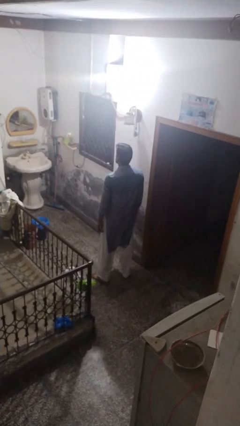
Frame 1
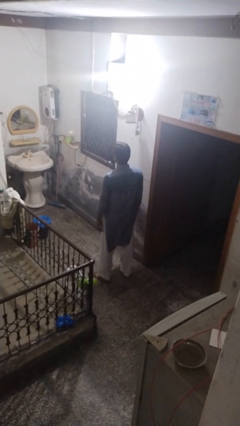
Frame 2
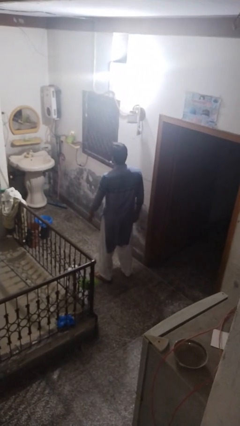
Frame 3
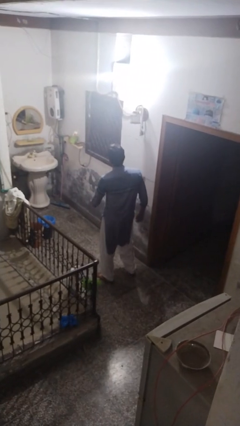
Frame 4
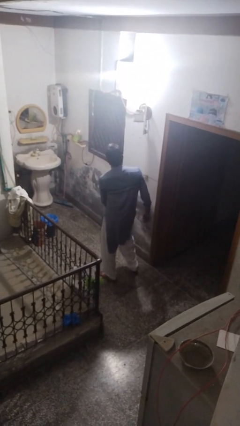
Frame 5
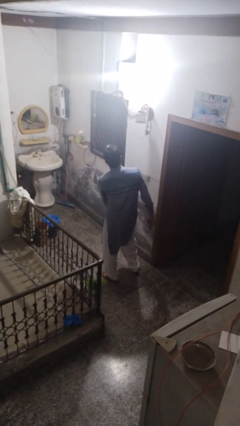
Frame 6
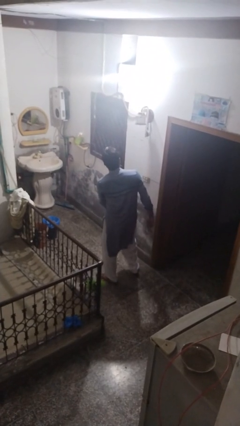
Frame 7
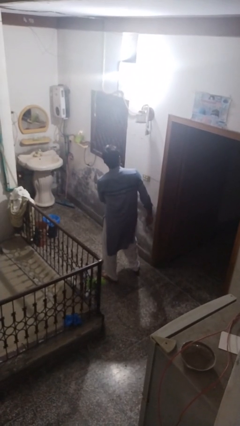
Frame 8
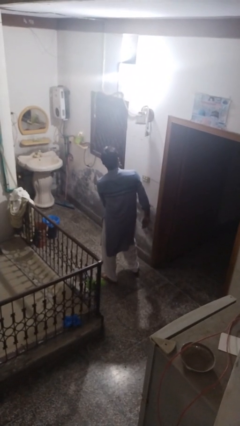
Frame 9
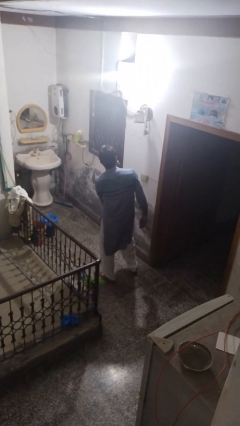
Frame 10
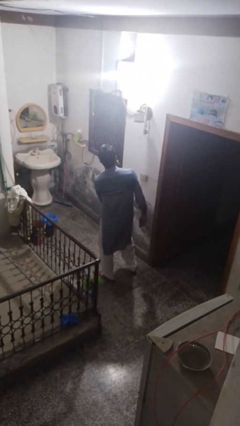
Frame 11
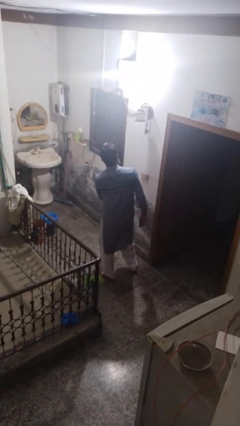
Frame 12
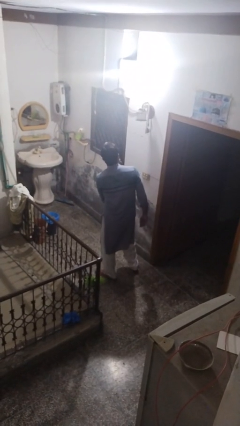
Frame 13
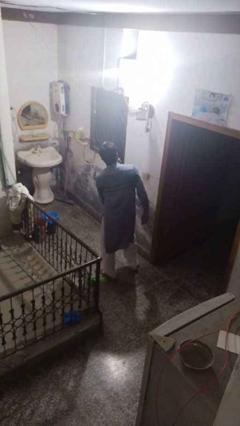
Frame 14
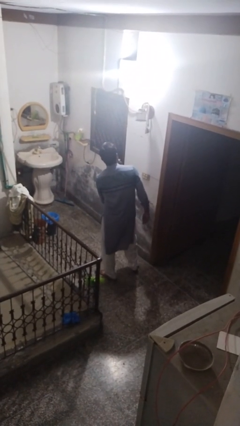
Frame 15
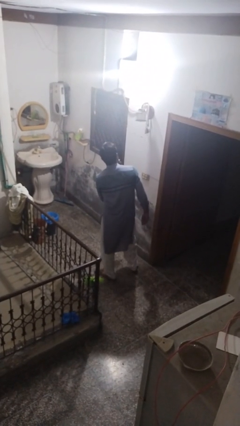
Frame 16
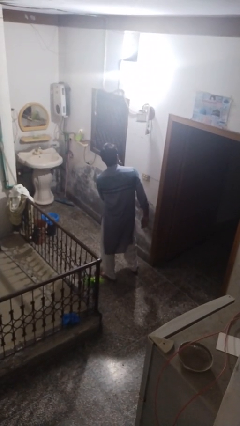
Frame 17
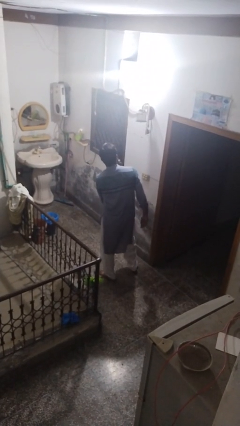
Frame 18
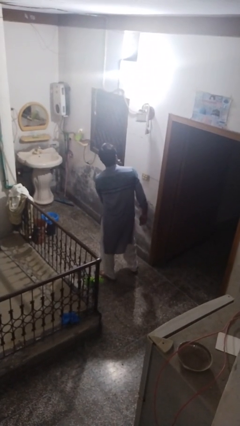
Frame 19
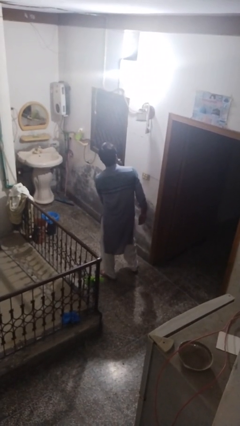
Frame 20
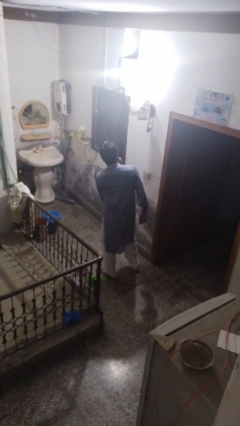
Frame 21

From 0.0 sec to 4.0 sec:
person slaps hands on thighs

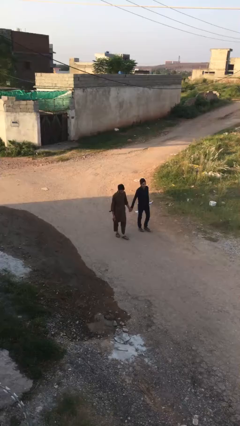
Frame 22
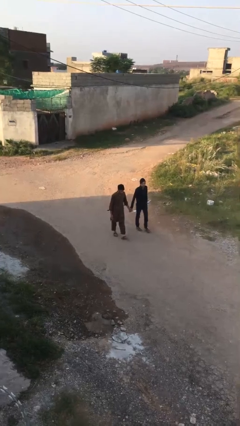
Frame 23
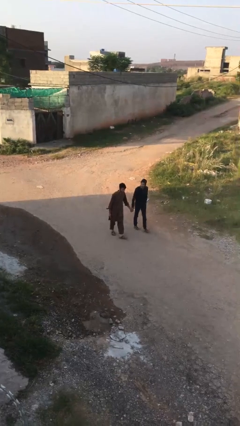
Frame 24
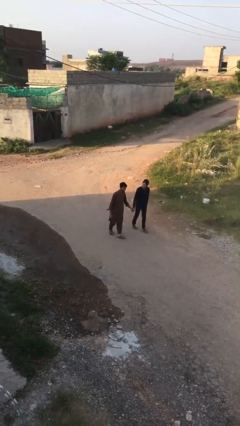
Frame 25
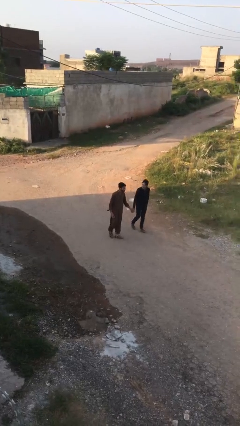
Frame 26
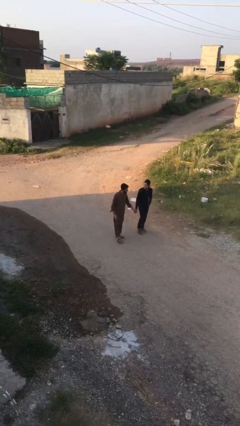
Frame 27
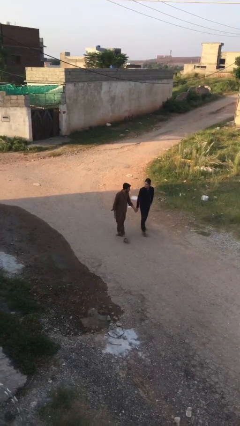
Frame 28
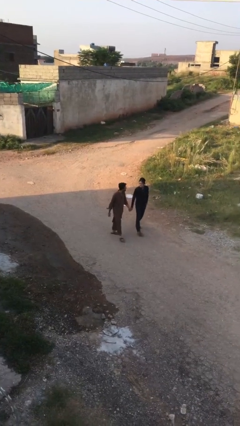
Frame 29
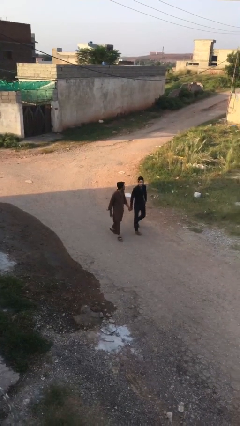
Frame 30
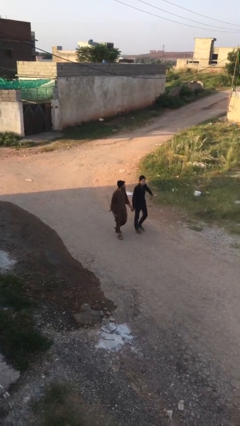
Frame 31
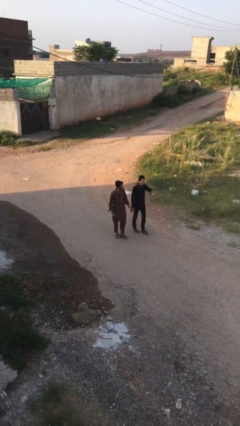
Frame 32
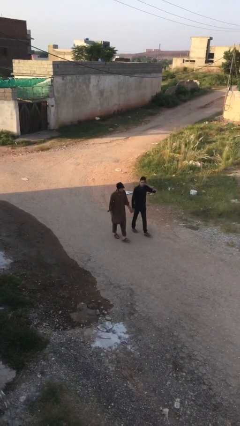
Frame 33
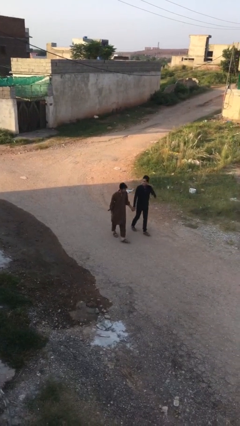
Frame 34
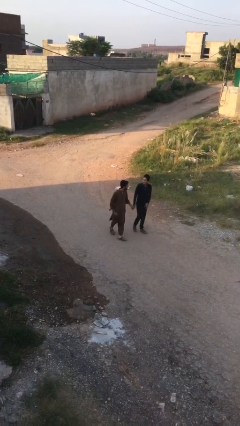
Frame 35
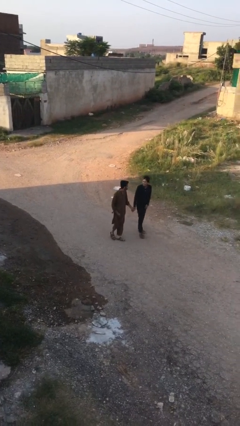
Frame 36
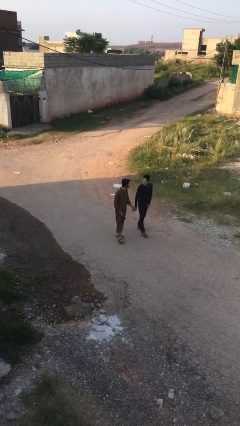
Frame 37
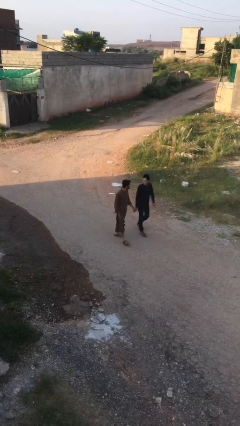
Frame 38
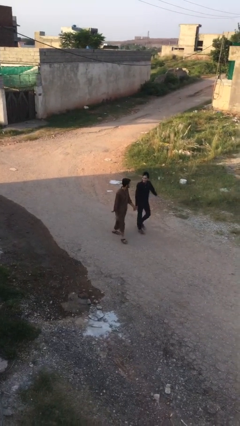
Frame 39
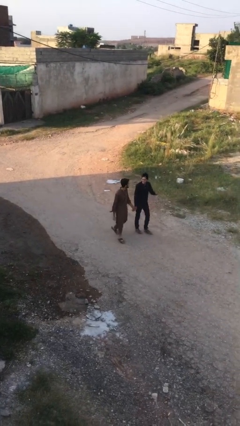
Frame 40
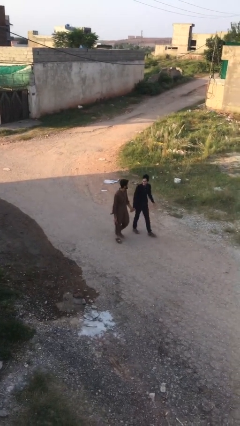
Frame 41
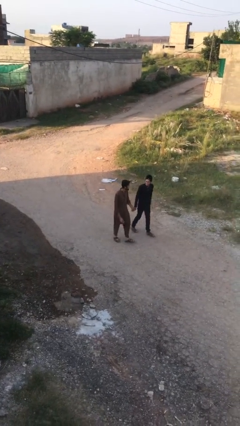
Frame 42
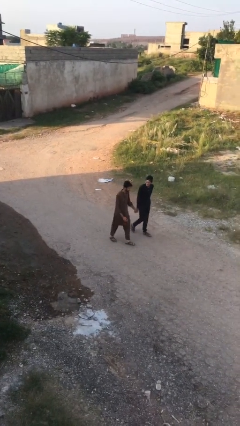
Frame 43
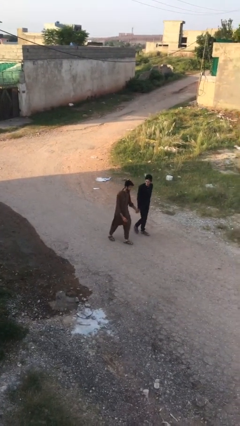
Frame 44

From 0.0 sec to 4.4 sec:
person holds hand

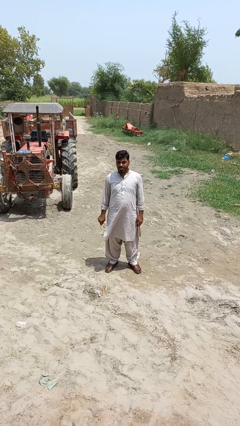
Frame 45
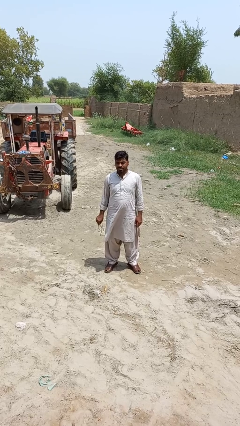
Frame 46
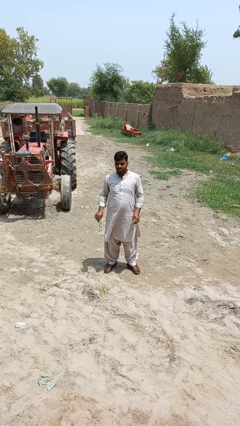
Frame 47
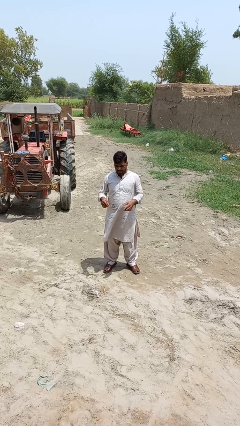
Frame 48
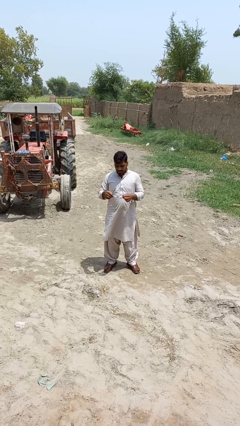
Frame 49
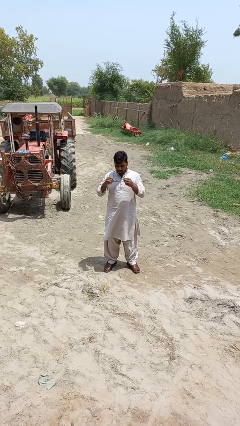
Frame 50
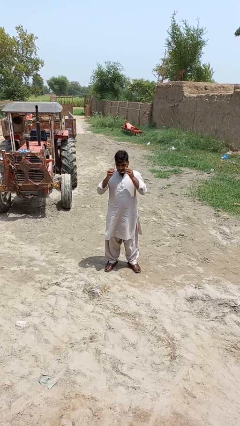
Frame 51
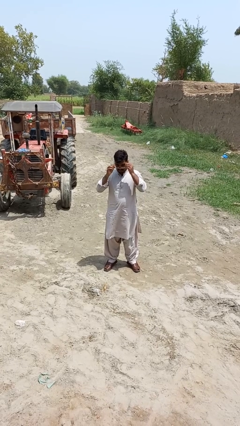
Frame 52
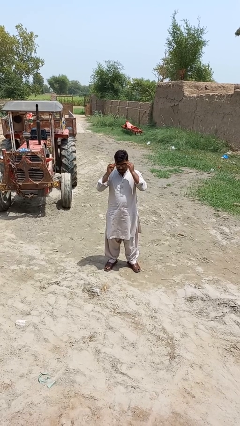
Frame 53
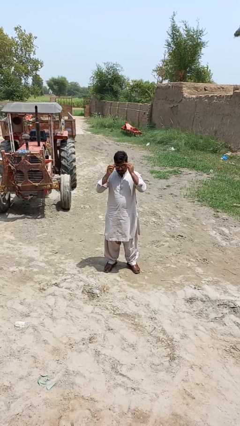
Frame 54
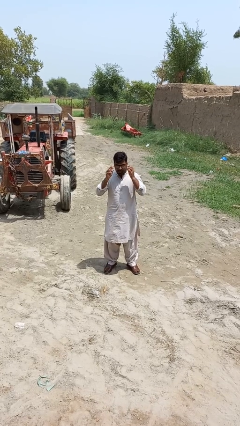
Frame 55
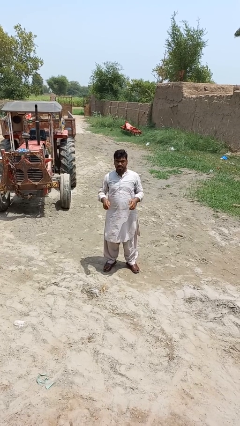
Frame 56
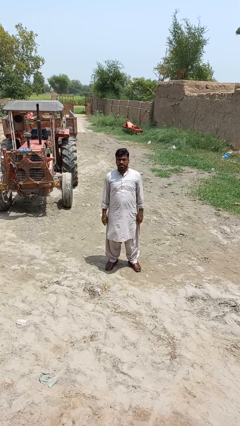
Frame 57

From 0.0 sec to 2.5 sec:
person puts on glasses

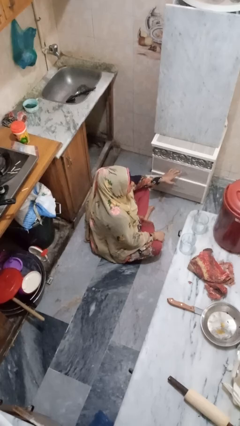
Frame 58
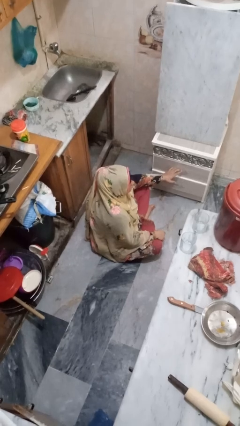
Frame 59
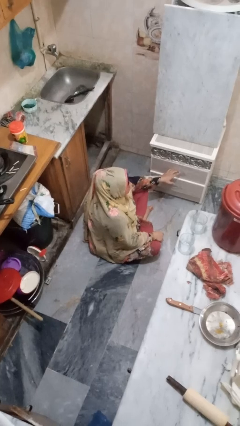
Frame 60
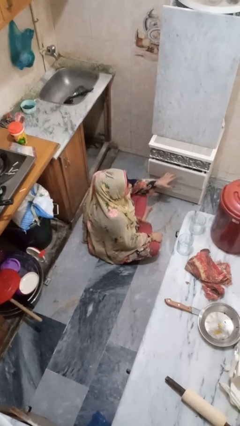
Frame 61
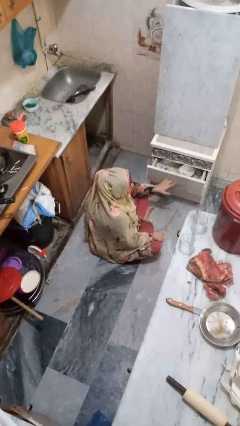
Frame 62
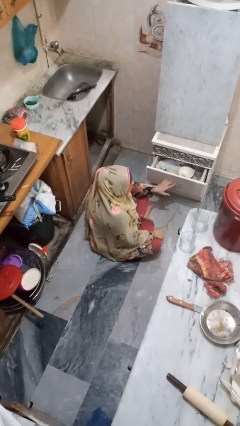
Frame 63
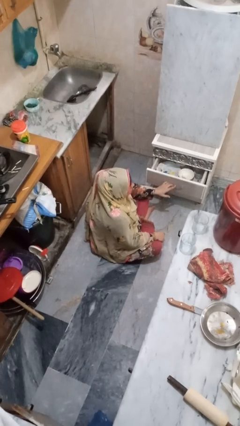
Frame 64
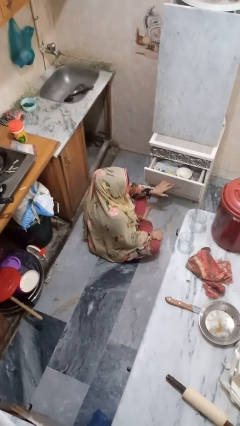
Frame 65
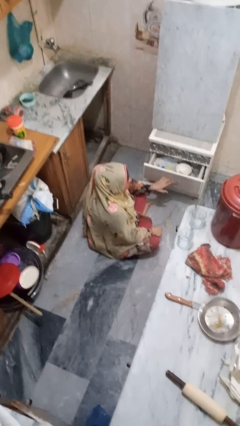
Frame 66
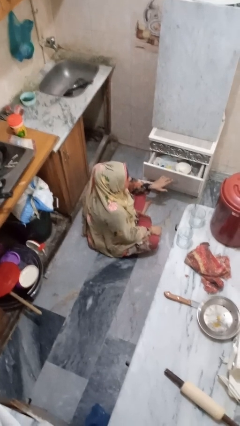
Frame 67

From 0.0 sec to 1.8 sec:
person opens kitchen drawer

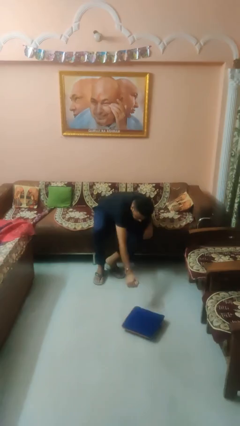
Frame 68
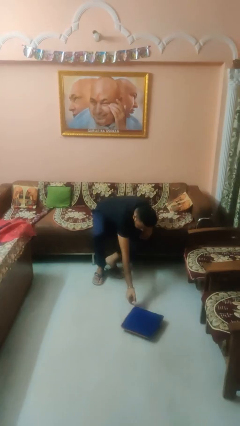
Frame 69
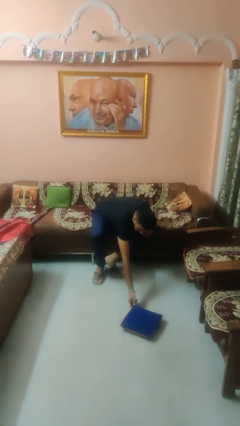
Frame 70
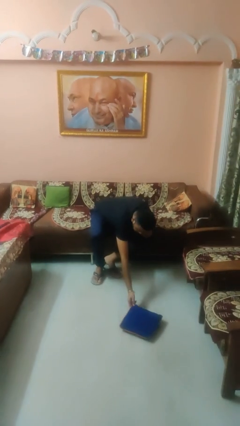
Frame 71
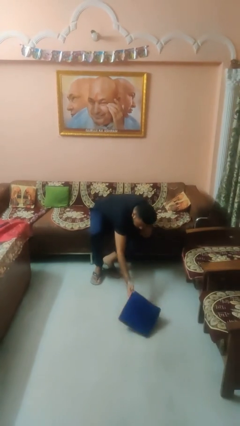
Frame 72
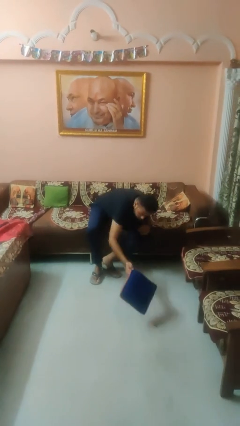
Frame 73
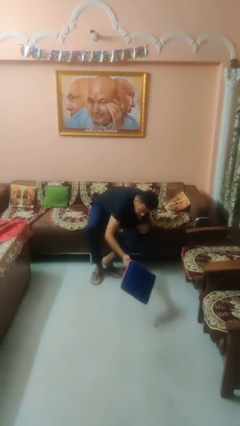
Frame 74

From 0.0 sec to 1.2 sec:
person picks up object from floor

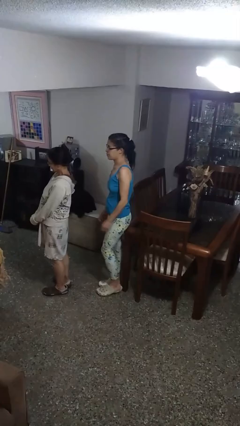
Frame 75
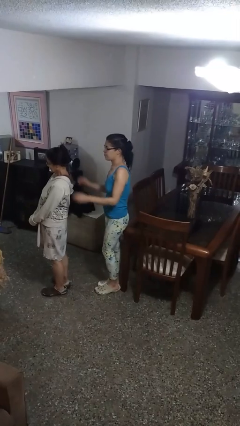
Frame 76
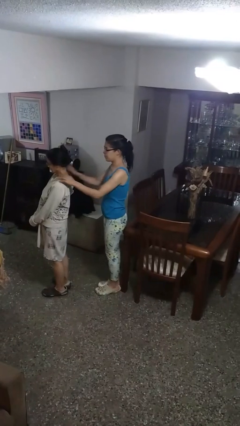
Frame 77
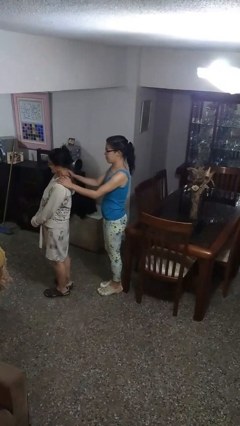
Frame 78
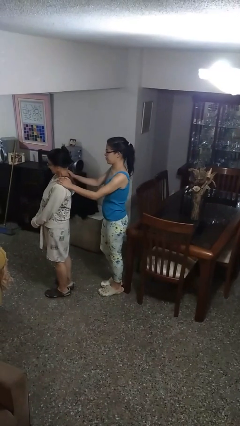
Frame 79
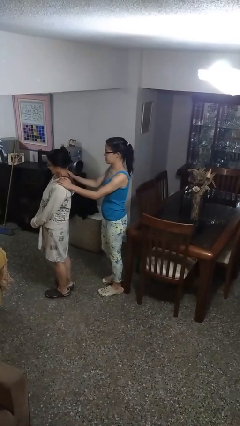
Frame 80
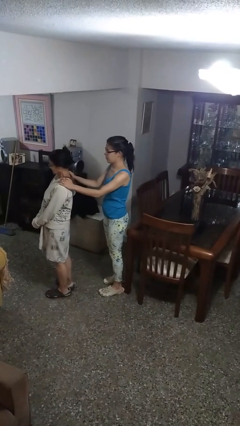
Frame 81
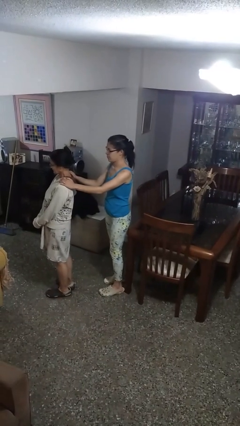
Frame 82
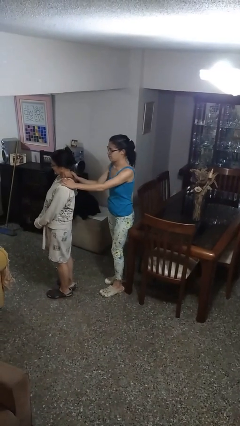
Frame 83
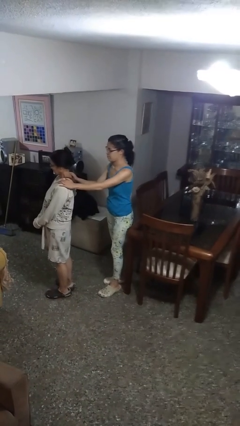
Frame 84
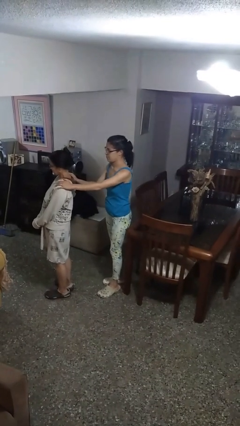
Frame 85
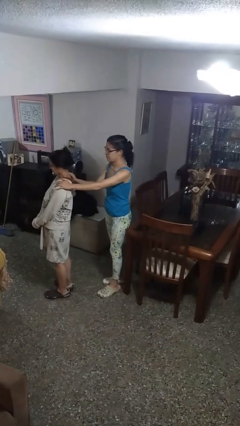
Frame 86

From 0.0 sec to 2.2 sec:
person grabs person by shoulder

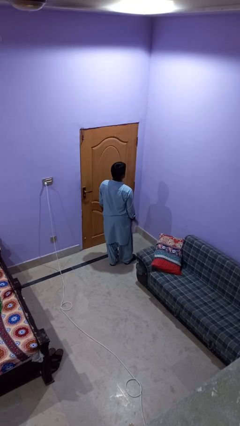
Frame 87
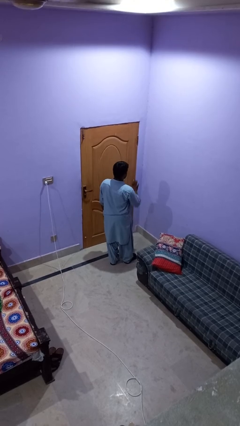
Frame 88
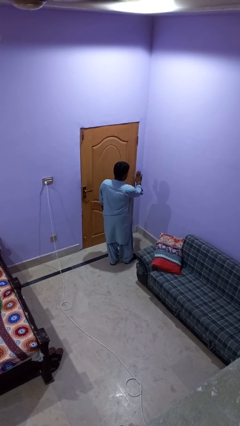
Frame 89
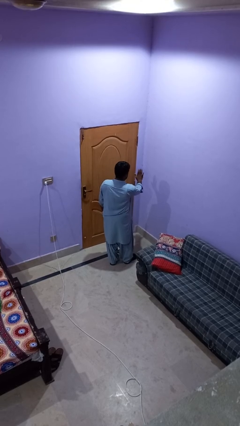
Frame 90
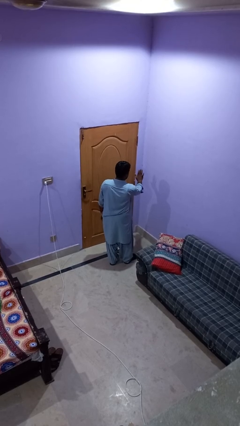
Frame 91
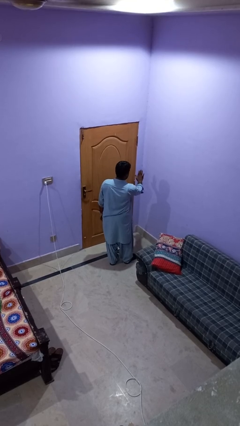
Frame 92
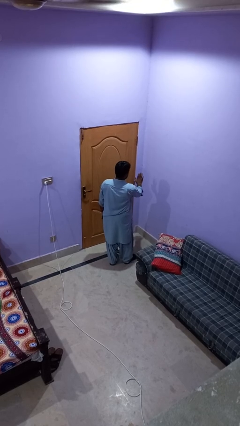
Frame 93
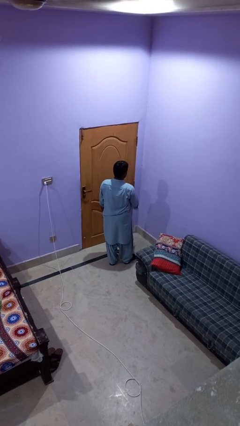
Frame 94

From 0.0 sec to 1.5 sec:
person gestures stop
